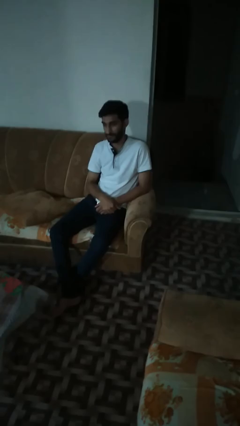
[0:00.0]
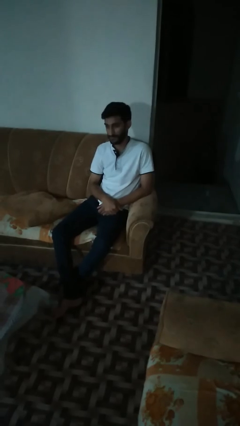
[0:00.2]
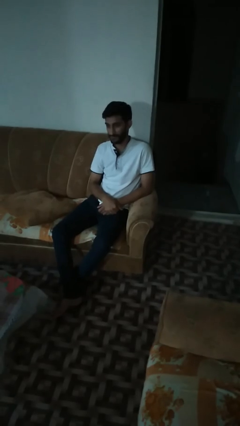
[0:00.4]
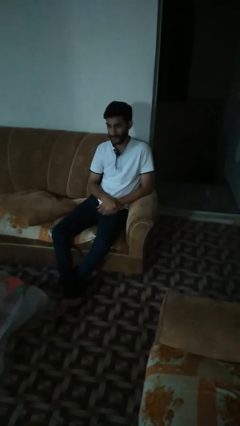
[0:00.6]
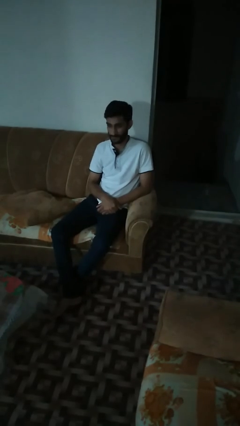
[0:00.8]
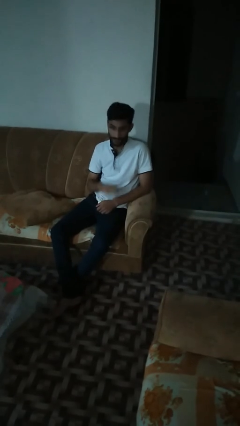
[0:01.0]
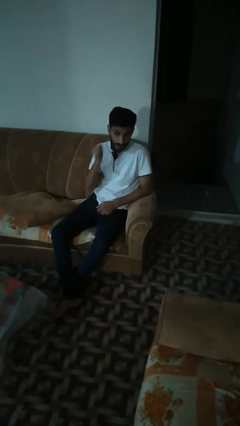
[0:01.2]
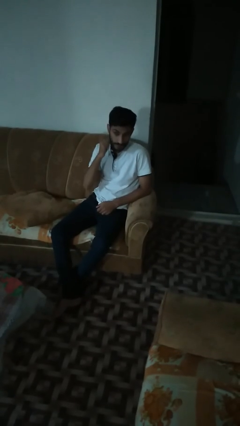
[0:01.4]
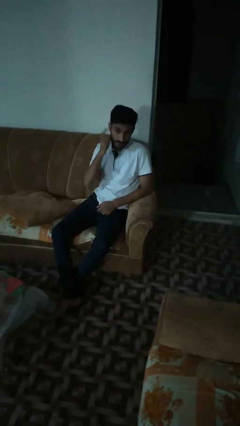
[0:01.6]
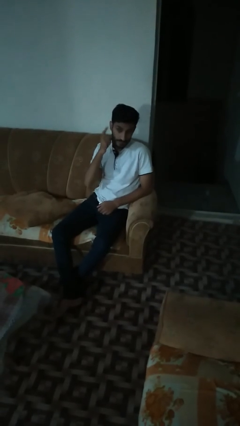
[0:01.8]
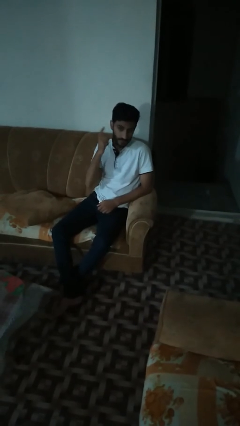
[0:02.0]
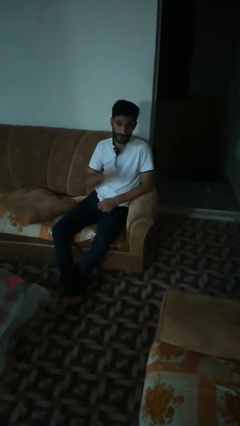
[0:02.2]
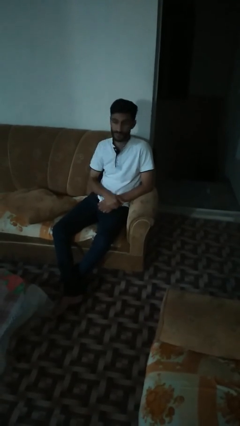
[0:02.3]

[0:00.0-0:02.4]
person gestures listen closely

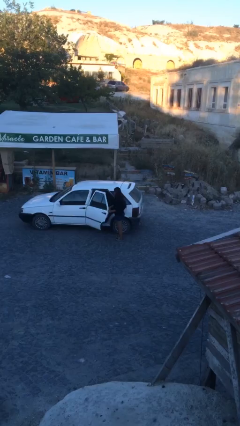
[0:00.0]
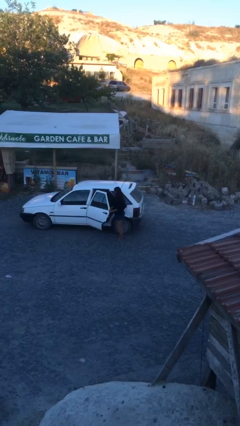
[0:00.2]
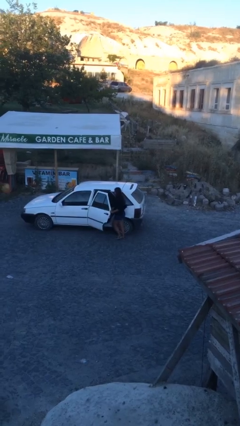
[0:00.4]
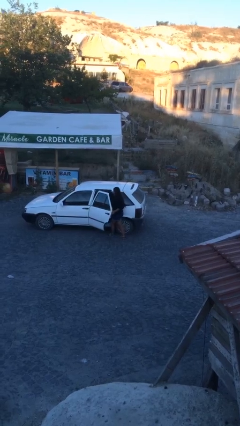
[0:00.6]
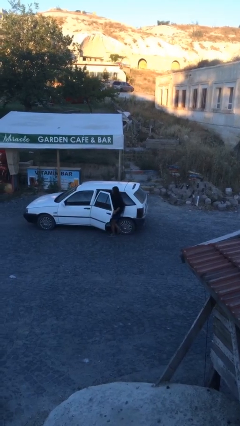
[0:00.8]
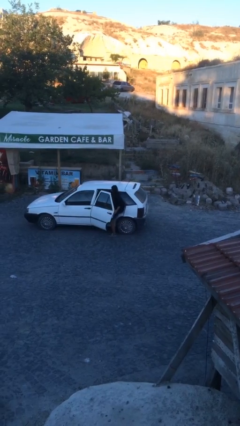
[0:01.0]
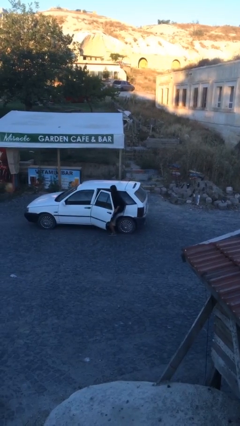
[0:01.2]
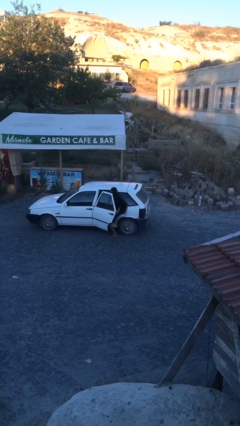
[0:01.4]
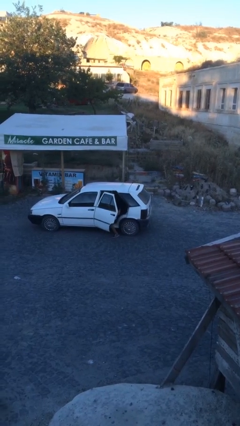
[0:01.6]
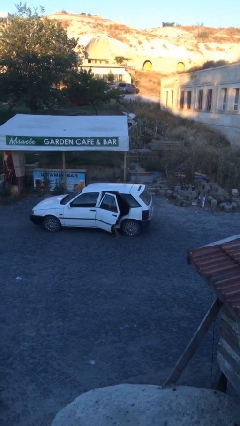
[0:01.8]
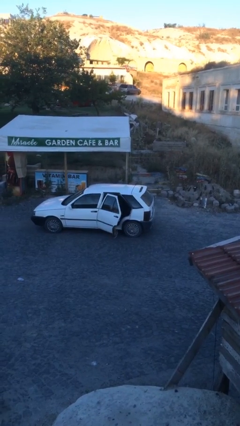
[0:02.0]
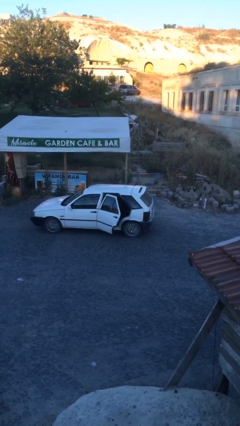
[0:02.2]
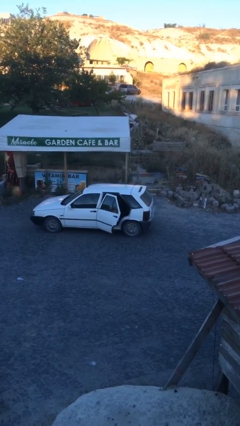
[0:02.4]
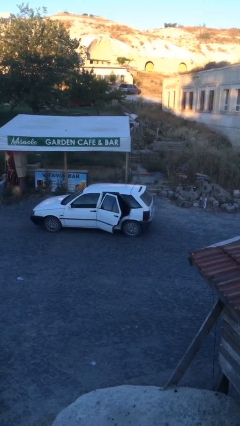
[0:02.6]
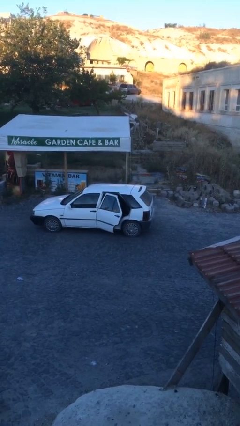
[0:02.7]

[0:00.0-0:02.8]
person enters car

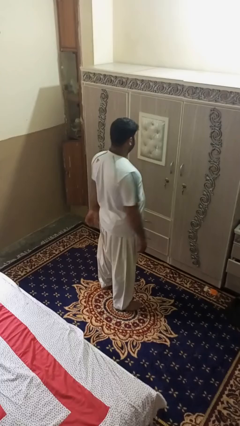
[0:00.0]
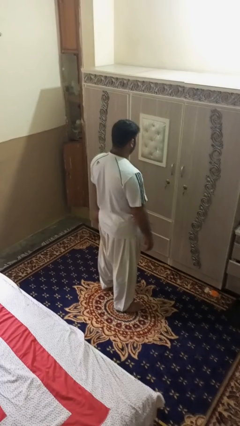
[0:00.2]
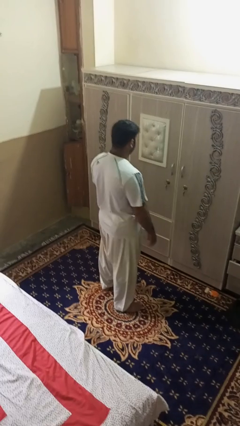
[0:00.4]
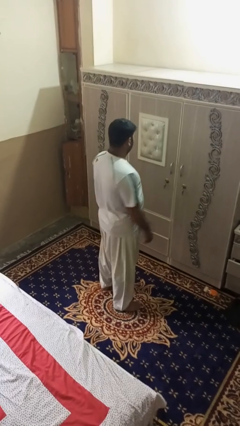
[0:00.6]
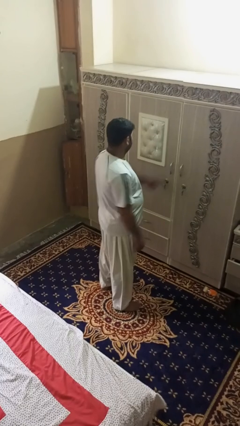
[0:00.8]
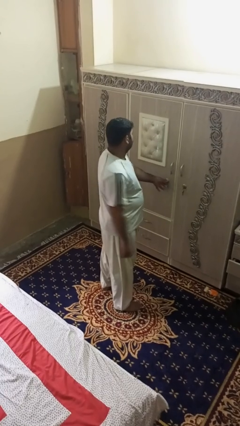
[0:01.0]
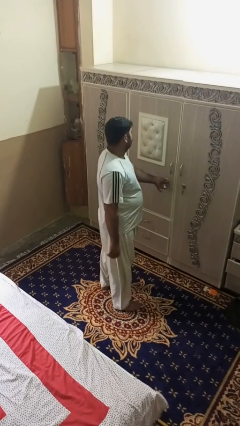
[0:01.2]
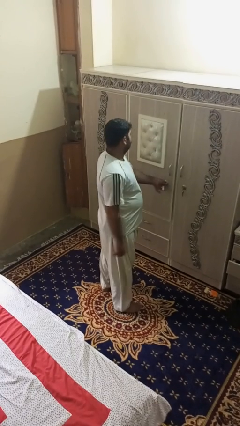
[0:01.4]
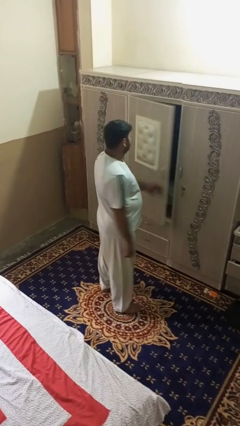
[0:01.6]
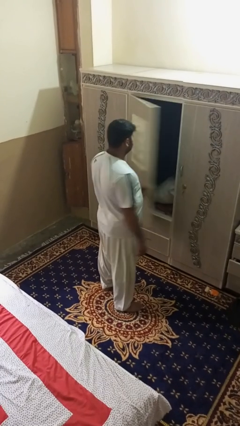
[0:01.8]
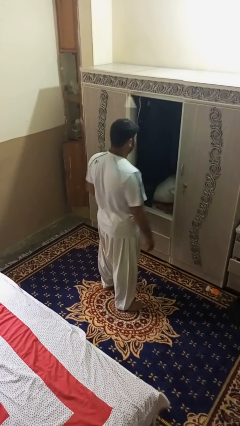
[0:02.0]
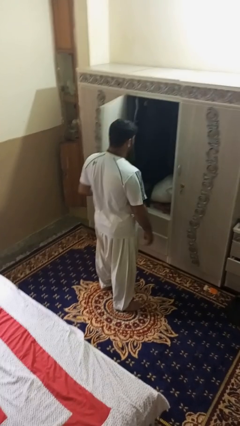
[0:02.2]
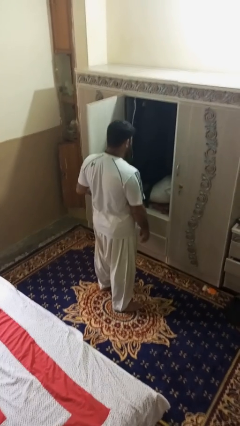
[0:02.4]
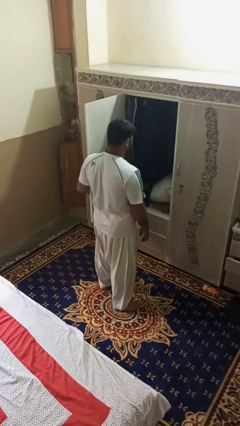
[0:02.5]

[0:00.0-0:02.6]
person opens dresser drawer

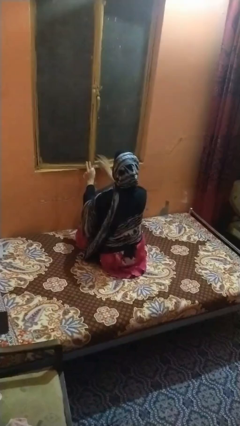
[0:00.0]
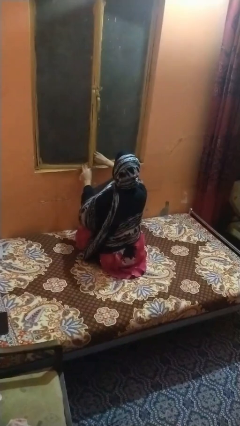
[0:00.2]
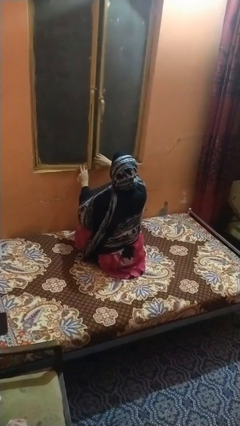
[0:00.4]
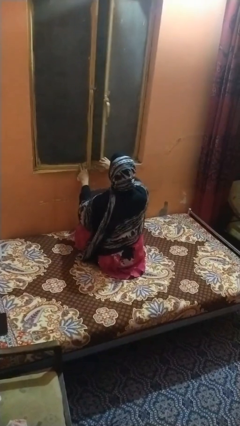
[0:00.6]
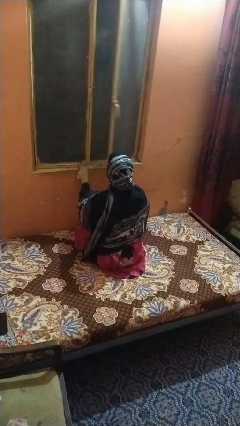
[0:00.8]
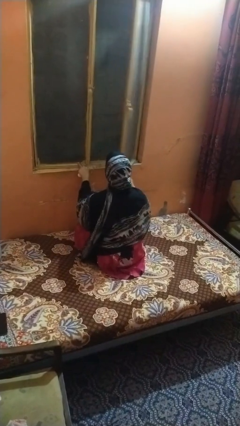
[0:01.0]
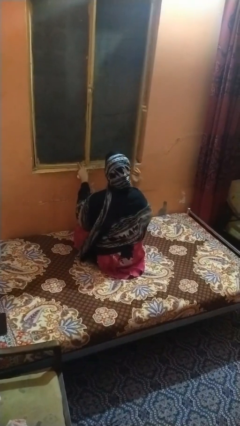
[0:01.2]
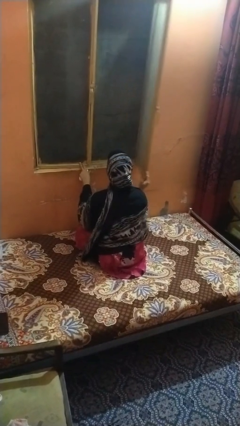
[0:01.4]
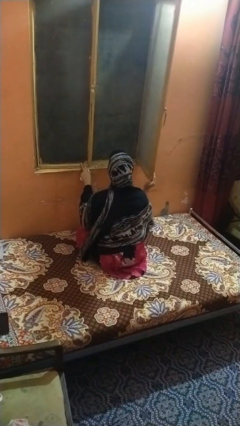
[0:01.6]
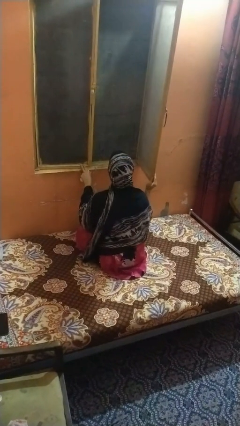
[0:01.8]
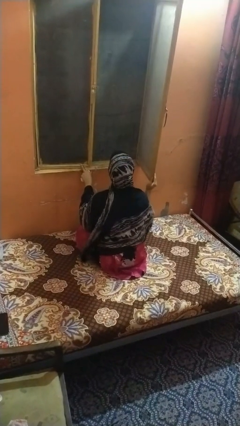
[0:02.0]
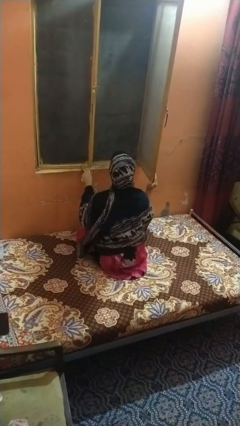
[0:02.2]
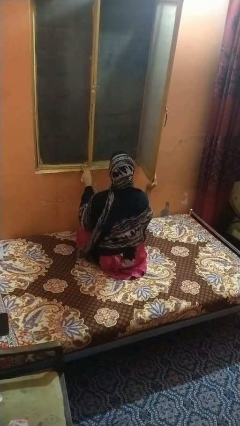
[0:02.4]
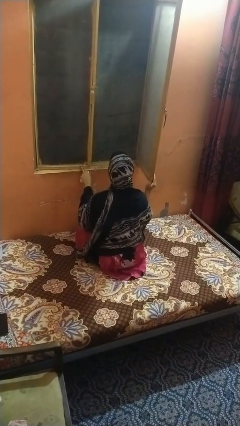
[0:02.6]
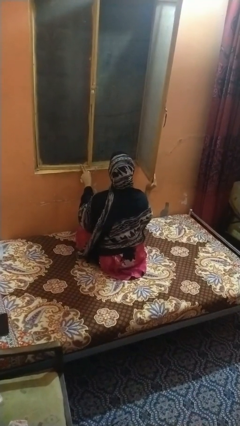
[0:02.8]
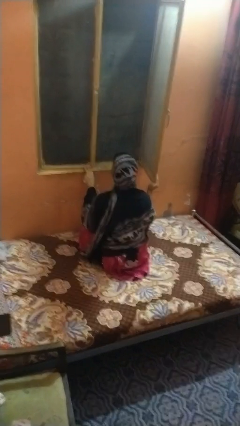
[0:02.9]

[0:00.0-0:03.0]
person opens home window

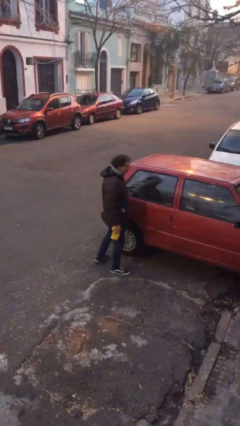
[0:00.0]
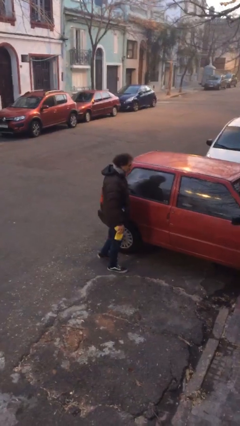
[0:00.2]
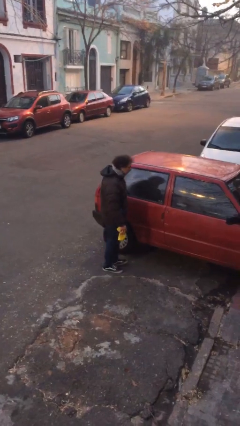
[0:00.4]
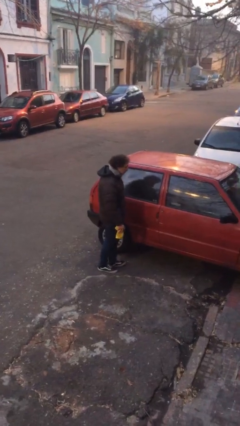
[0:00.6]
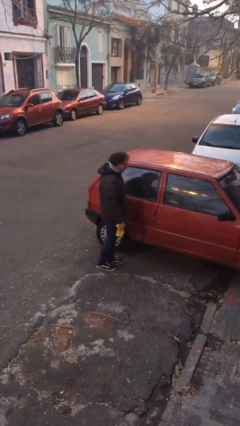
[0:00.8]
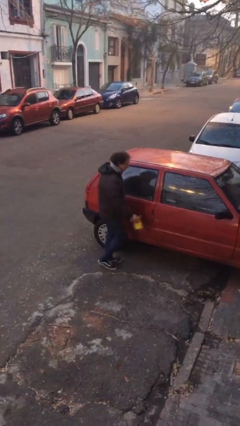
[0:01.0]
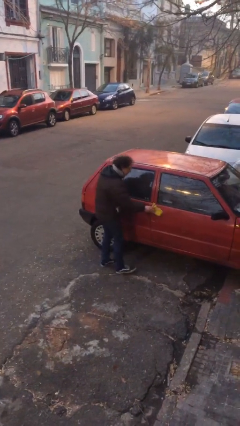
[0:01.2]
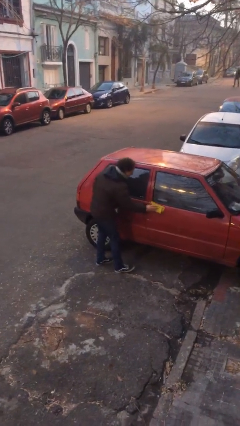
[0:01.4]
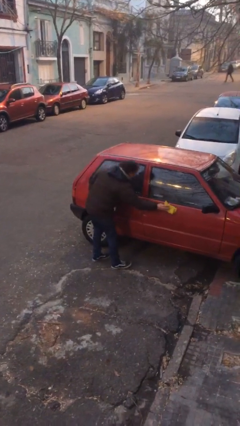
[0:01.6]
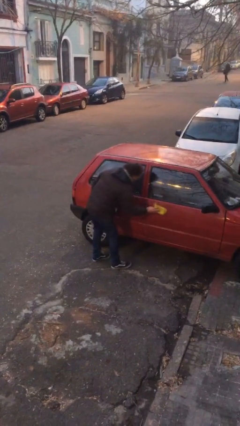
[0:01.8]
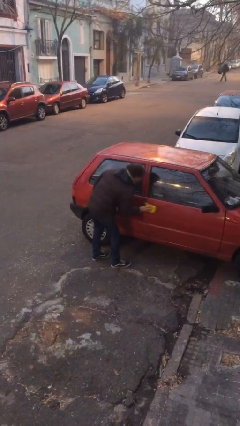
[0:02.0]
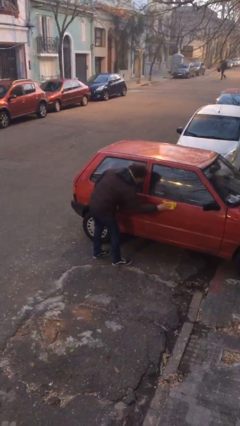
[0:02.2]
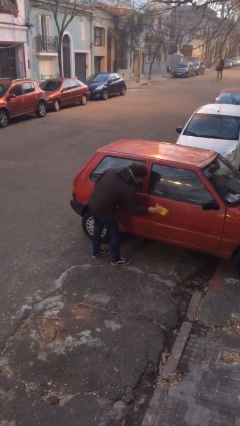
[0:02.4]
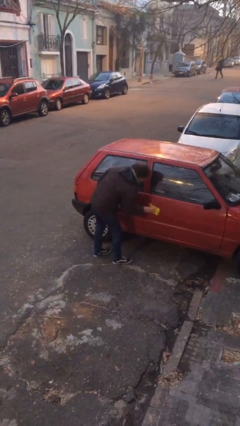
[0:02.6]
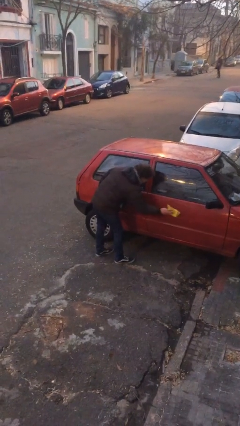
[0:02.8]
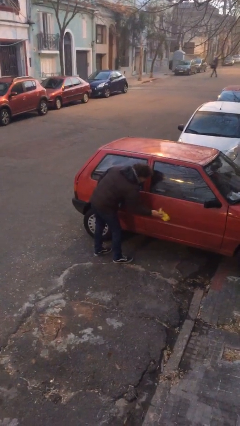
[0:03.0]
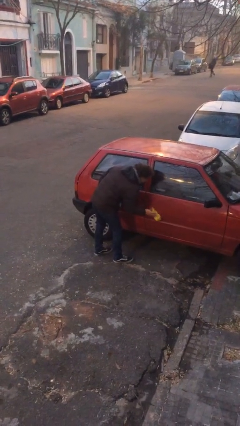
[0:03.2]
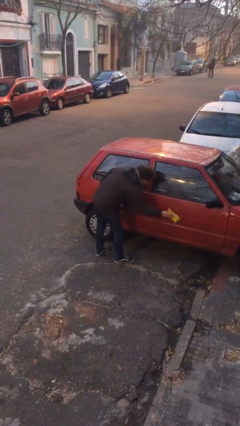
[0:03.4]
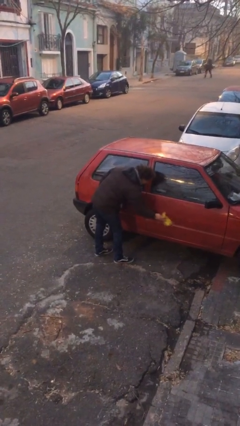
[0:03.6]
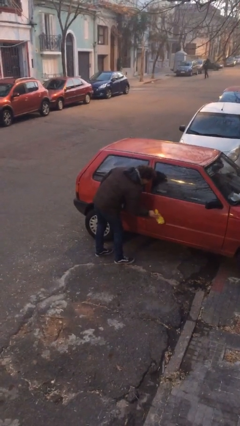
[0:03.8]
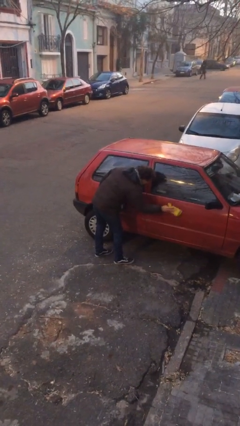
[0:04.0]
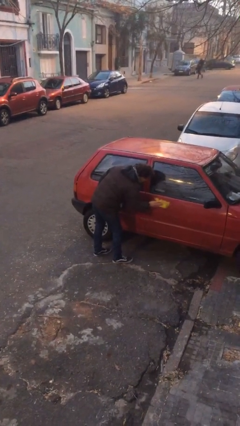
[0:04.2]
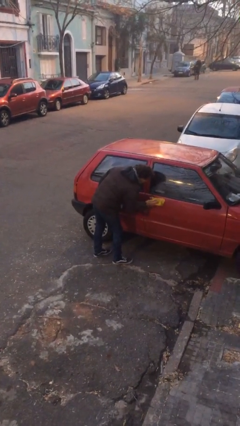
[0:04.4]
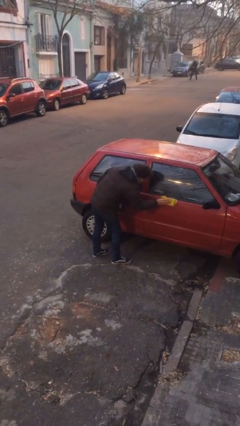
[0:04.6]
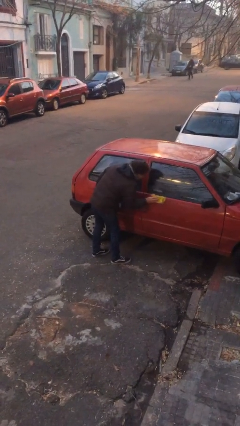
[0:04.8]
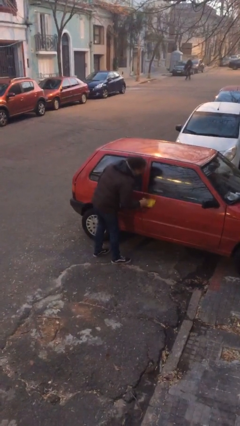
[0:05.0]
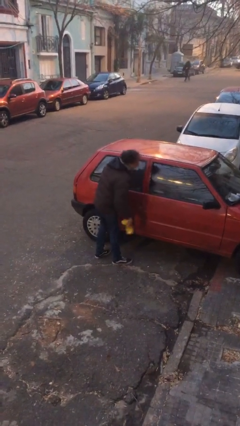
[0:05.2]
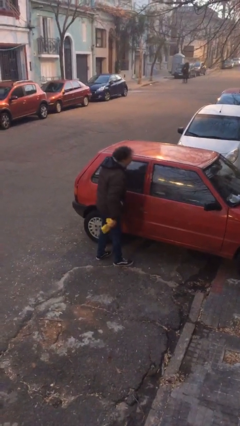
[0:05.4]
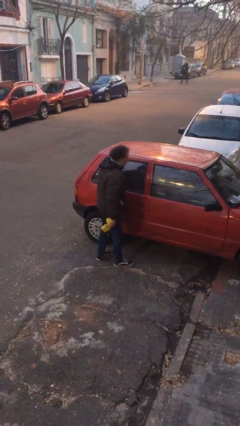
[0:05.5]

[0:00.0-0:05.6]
person polishes car with rag

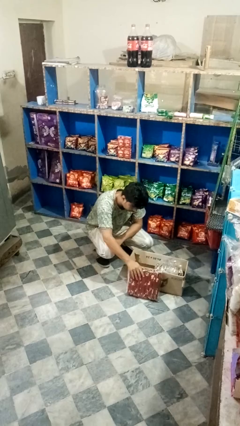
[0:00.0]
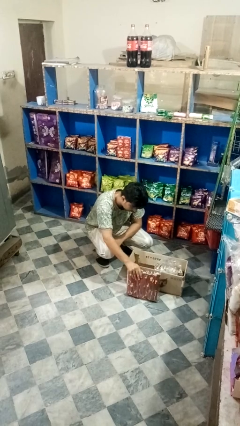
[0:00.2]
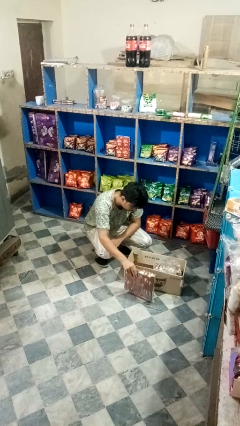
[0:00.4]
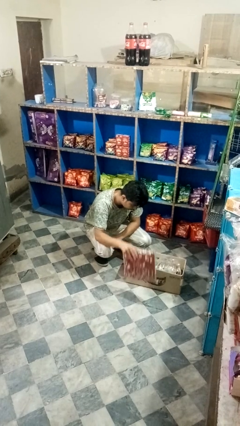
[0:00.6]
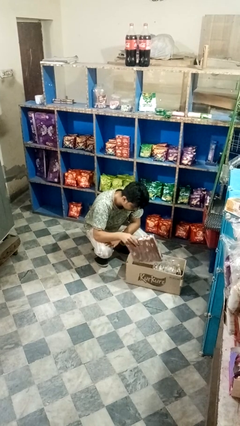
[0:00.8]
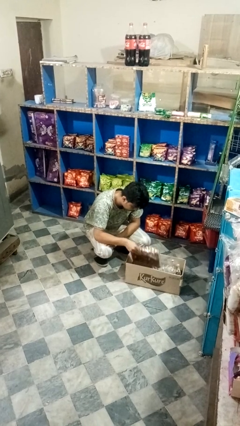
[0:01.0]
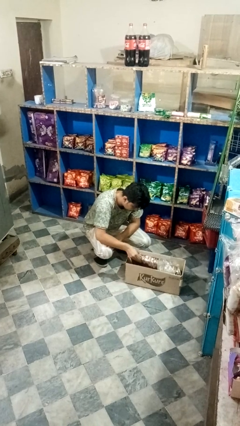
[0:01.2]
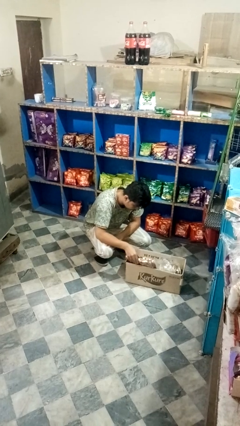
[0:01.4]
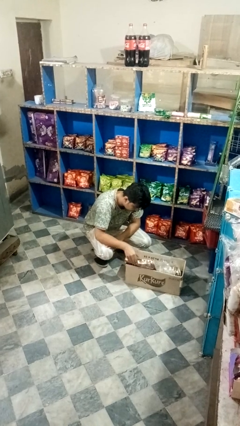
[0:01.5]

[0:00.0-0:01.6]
person puts object into box
